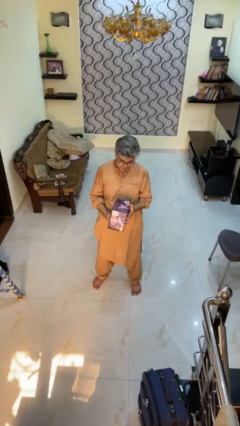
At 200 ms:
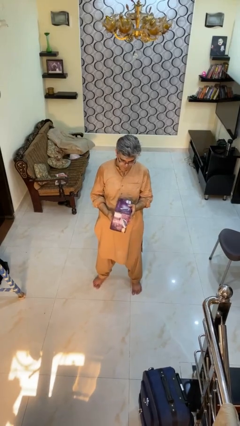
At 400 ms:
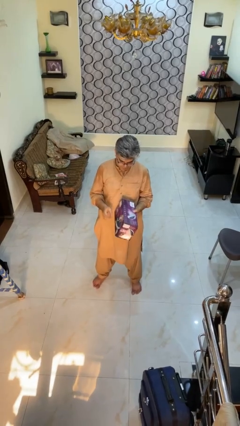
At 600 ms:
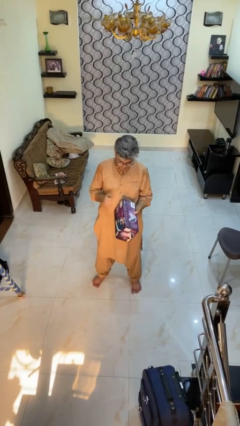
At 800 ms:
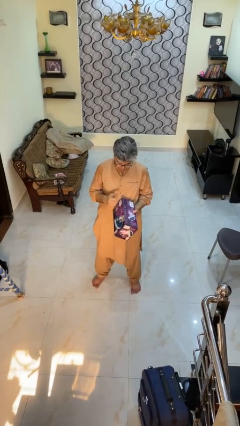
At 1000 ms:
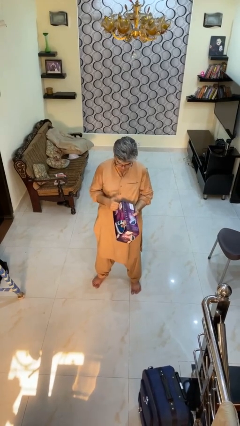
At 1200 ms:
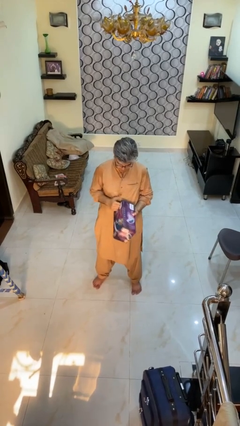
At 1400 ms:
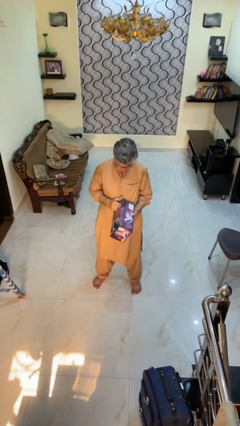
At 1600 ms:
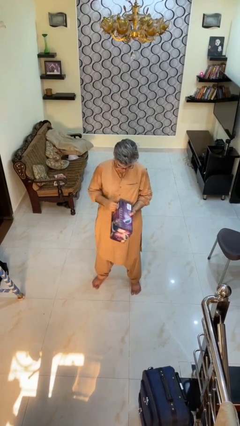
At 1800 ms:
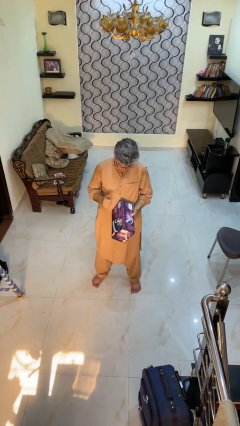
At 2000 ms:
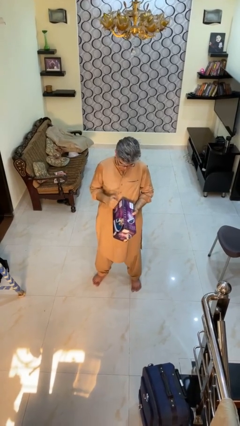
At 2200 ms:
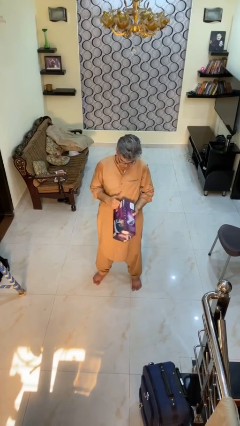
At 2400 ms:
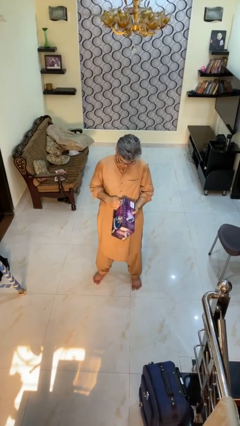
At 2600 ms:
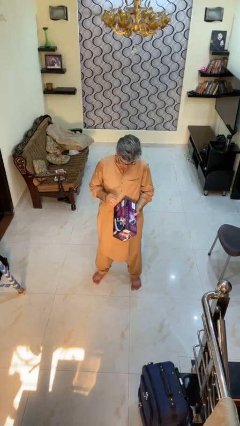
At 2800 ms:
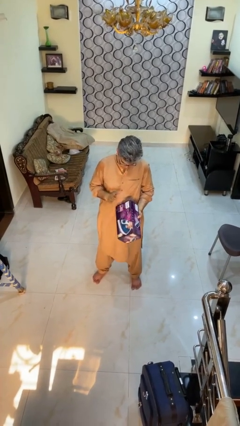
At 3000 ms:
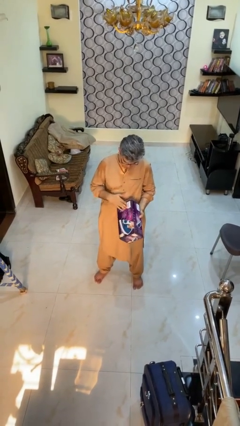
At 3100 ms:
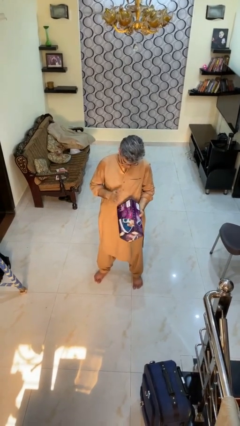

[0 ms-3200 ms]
person taps object with finger

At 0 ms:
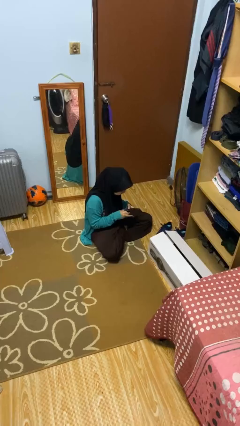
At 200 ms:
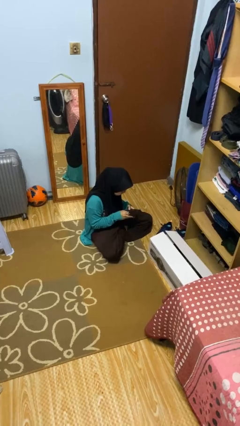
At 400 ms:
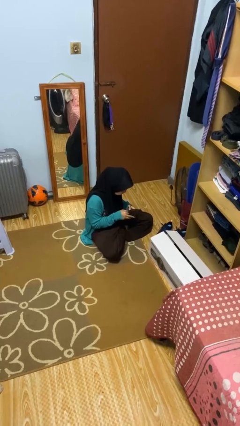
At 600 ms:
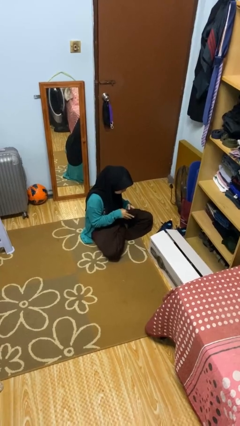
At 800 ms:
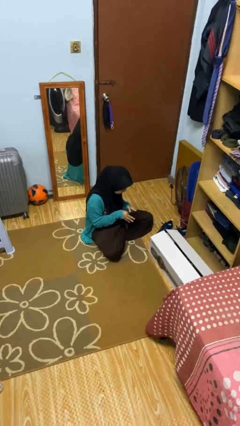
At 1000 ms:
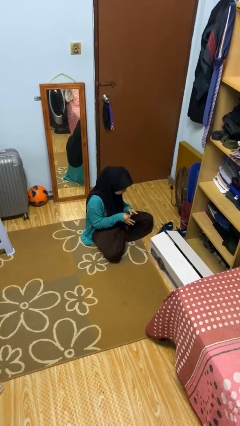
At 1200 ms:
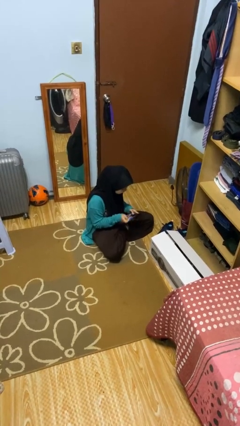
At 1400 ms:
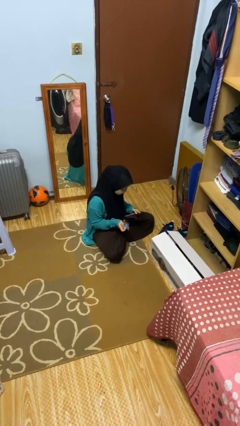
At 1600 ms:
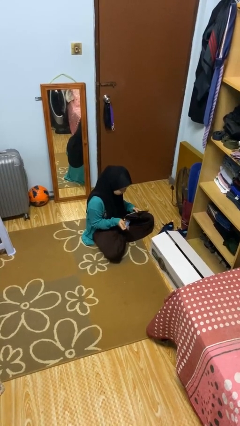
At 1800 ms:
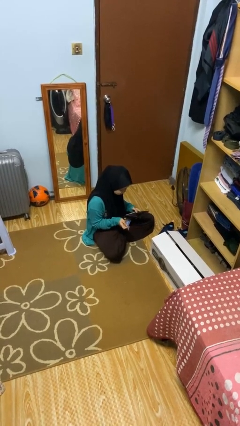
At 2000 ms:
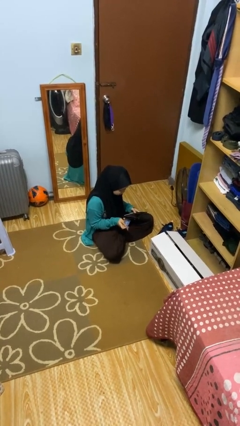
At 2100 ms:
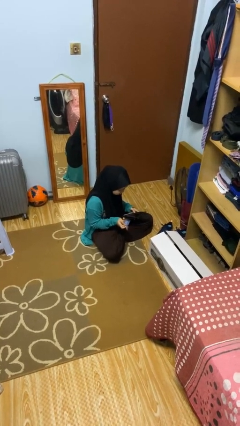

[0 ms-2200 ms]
person takes object from purse

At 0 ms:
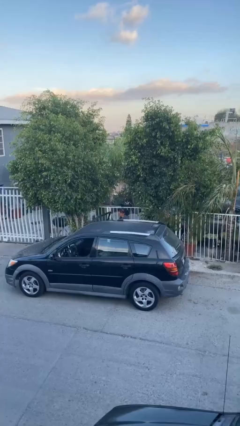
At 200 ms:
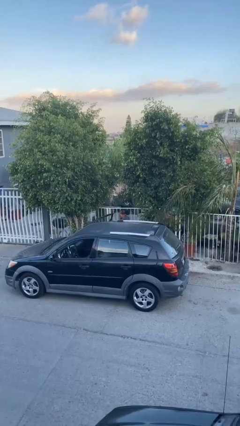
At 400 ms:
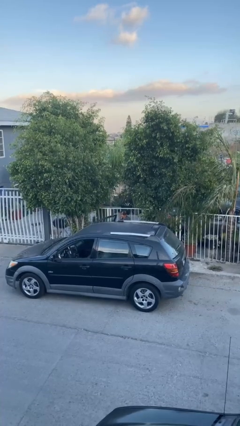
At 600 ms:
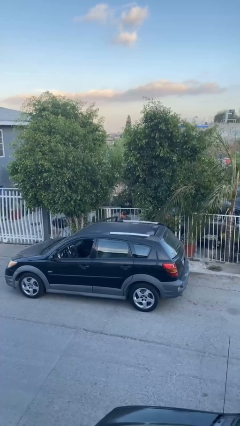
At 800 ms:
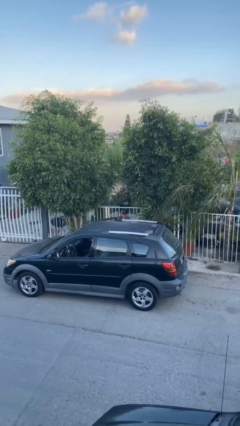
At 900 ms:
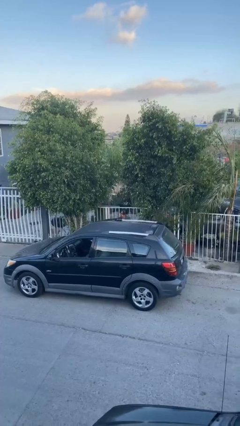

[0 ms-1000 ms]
person closes car door

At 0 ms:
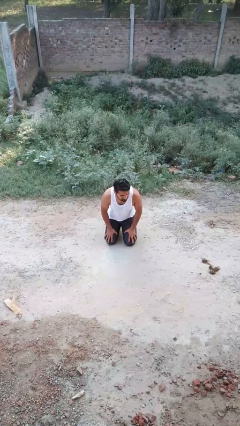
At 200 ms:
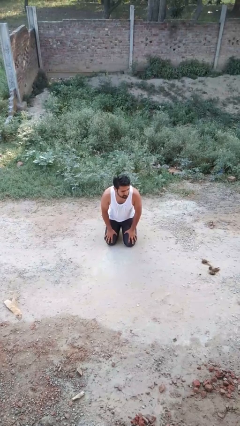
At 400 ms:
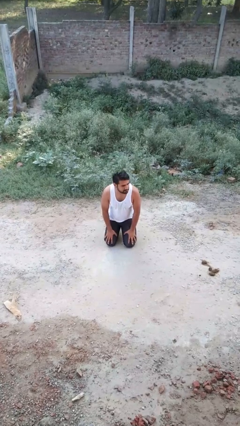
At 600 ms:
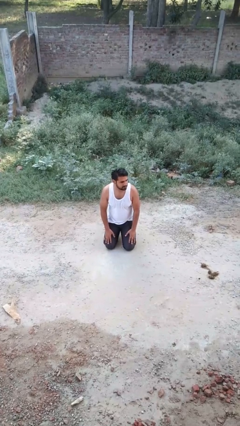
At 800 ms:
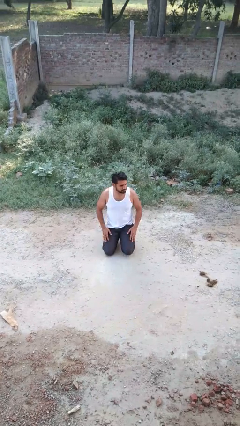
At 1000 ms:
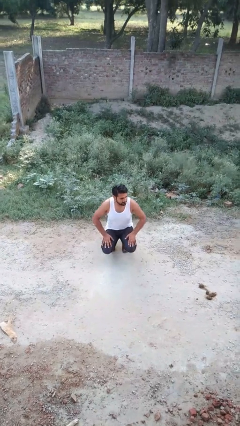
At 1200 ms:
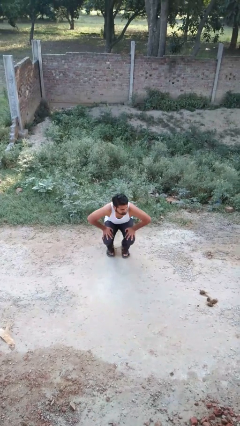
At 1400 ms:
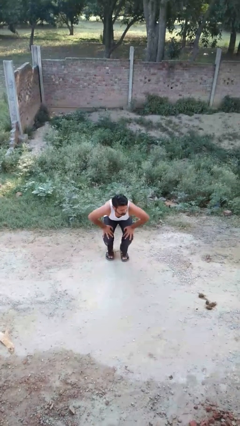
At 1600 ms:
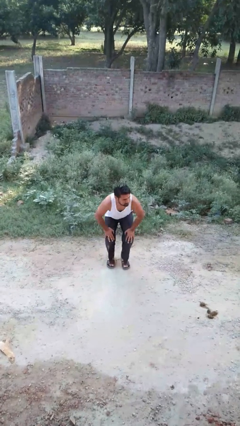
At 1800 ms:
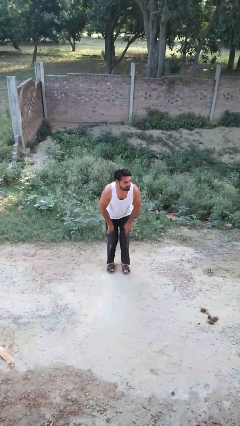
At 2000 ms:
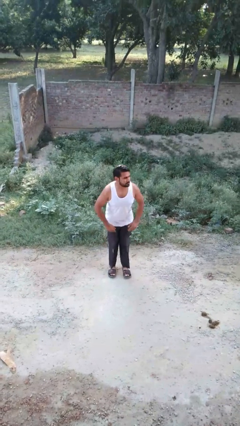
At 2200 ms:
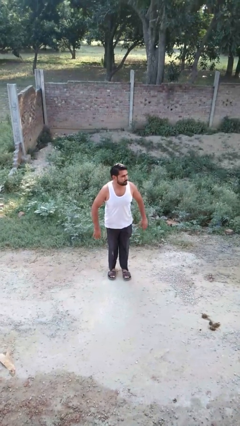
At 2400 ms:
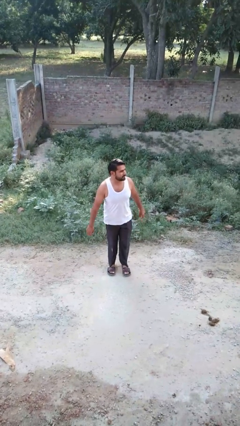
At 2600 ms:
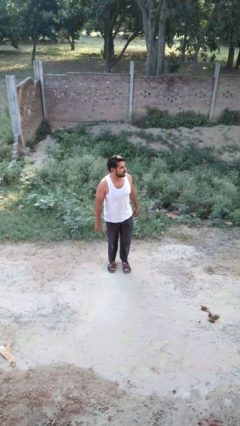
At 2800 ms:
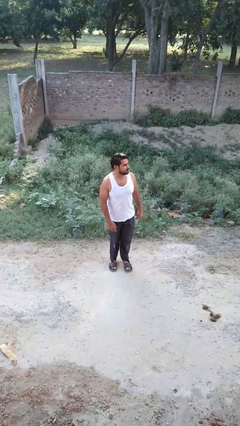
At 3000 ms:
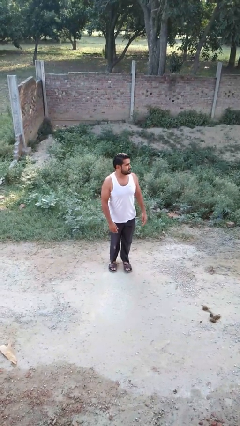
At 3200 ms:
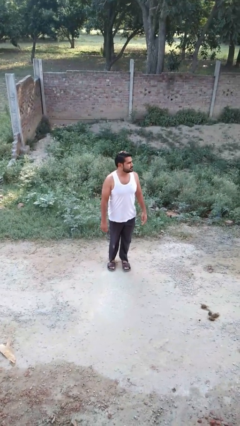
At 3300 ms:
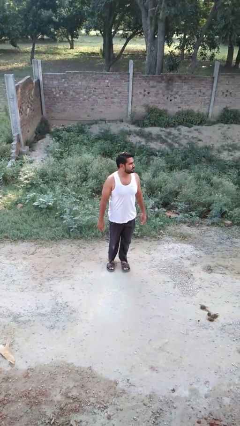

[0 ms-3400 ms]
person stands up from floor

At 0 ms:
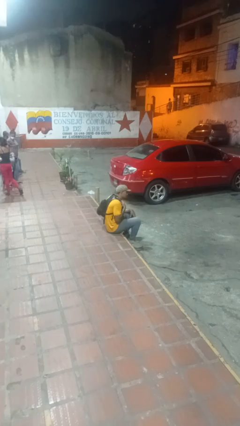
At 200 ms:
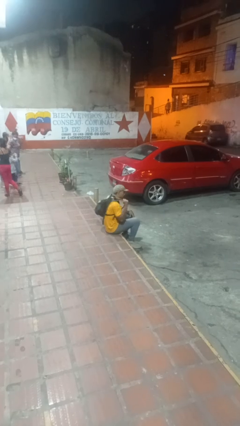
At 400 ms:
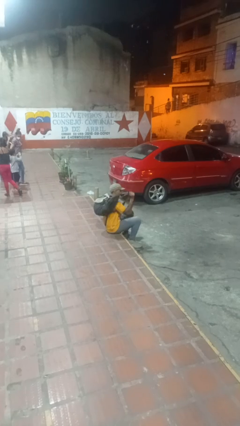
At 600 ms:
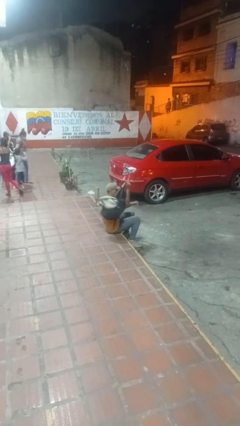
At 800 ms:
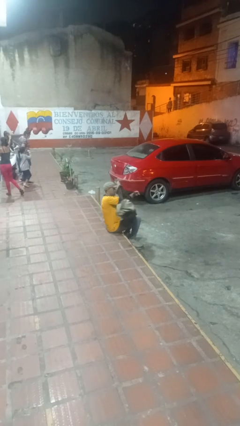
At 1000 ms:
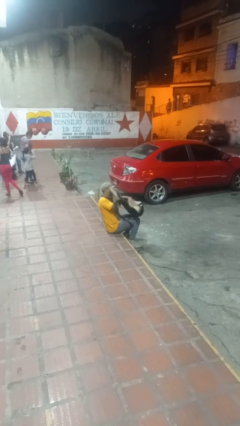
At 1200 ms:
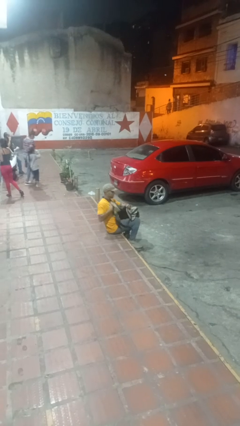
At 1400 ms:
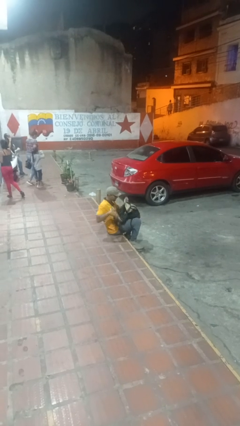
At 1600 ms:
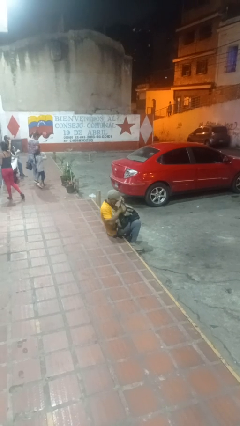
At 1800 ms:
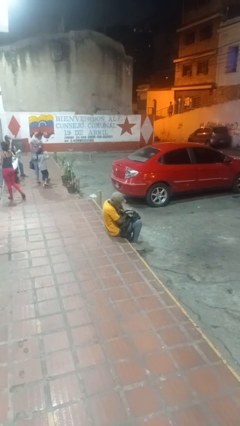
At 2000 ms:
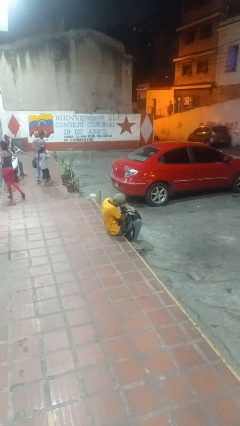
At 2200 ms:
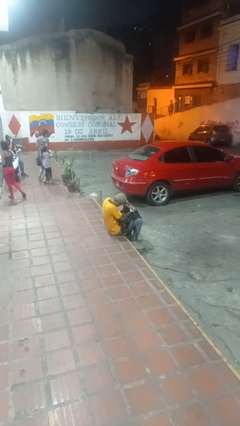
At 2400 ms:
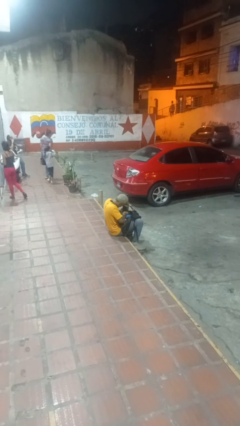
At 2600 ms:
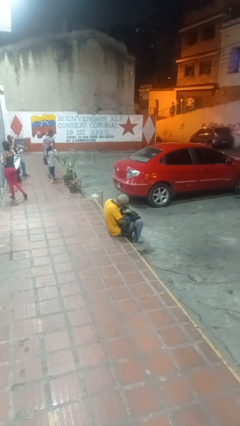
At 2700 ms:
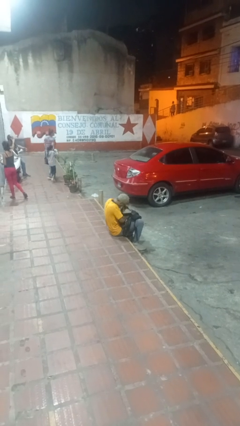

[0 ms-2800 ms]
person searches in backpack

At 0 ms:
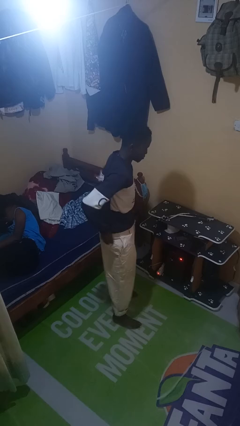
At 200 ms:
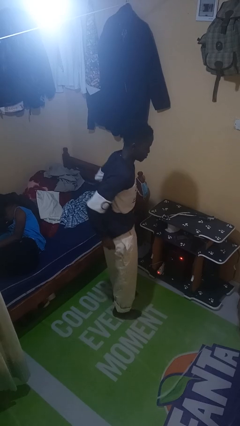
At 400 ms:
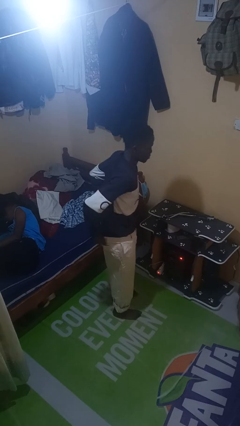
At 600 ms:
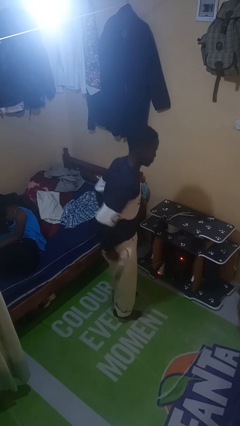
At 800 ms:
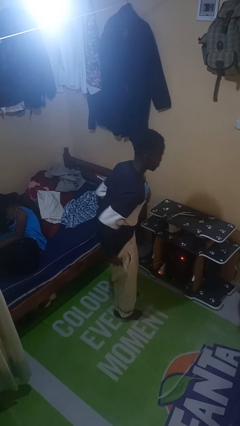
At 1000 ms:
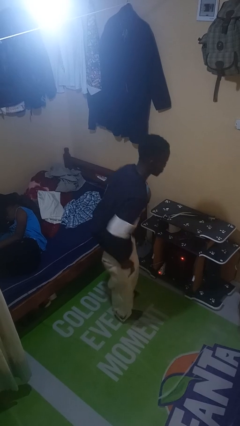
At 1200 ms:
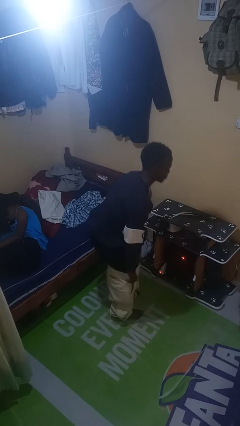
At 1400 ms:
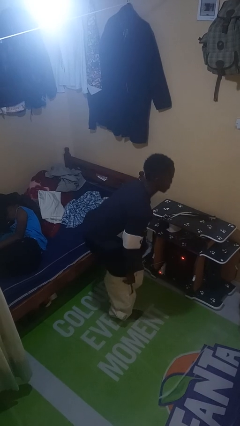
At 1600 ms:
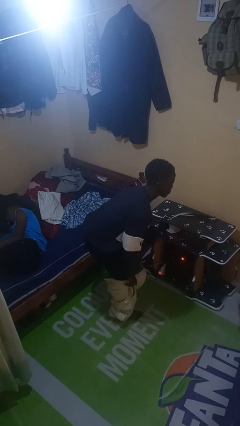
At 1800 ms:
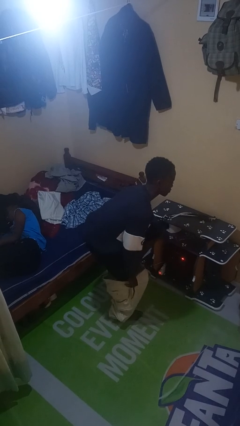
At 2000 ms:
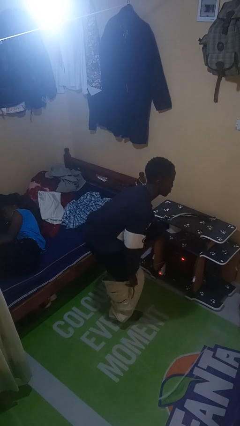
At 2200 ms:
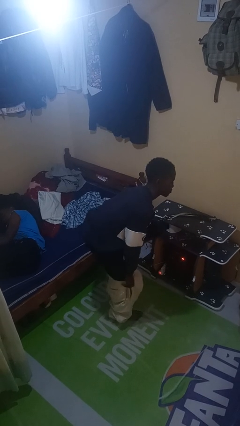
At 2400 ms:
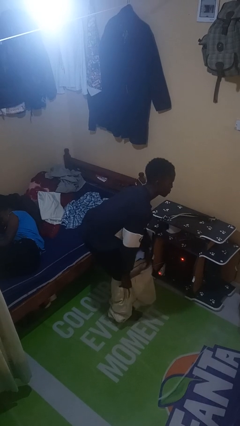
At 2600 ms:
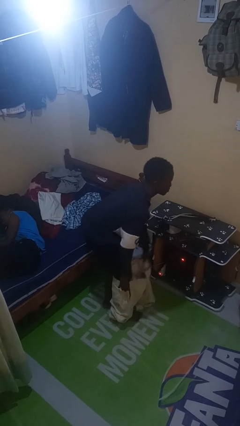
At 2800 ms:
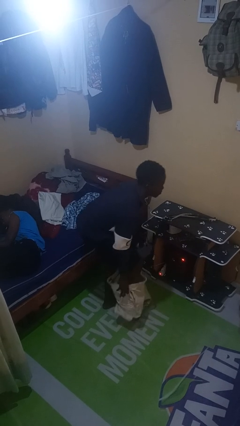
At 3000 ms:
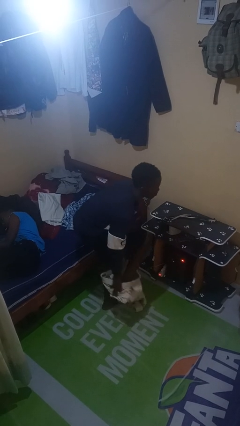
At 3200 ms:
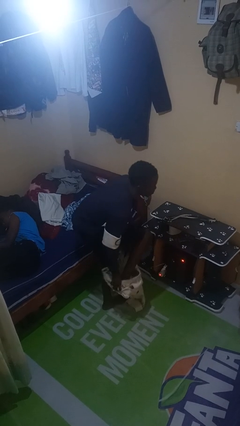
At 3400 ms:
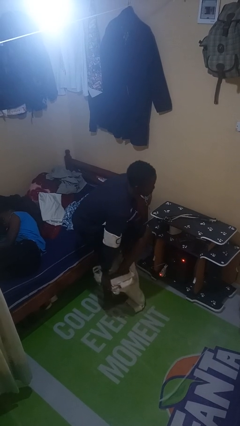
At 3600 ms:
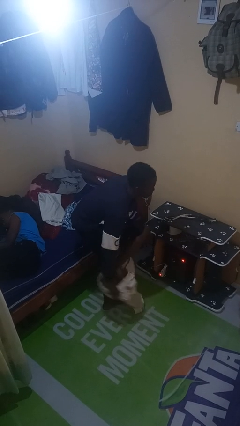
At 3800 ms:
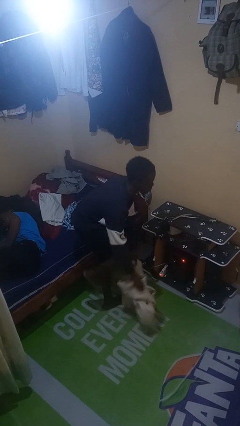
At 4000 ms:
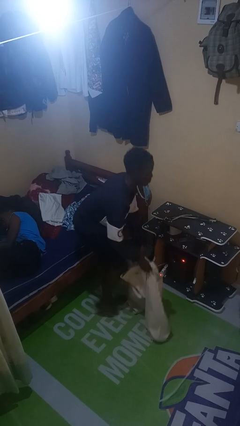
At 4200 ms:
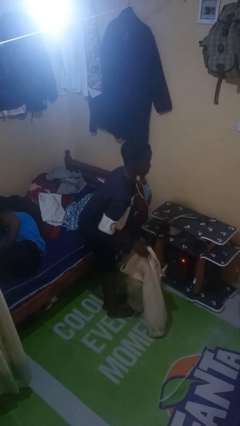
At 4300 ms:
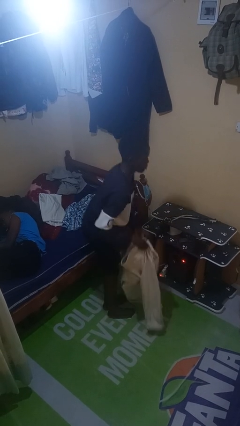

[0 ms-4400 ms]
person takes off pants

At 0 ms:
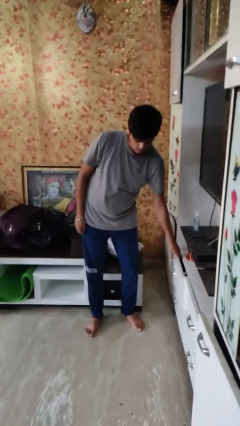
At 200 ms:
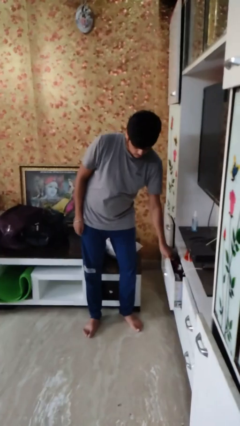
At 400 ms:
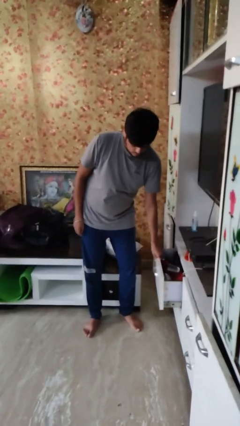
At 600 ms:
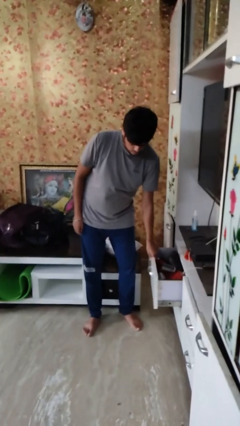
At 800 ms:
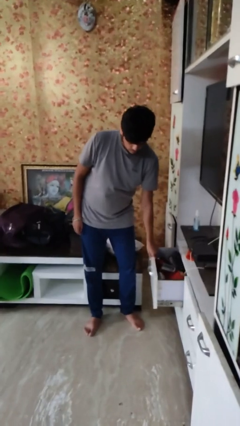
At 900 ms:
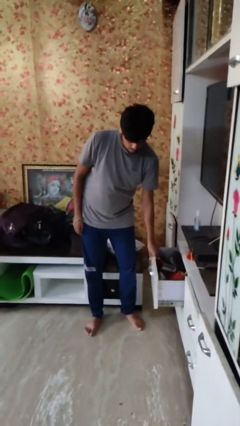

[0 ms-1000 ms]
person opens kitchen drawer
